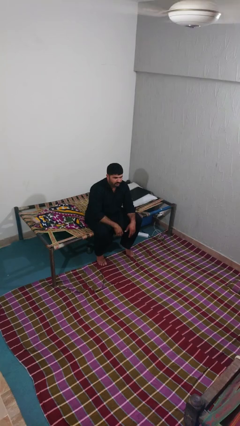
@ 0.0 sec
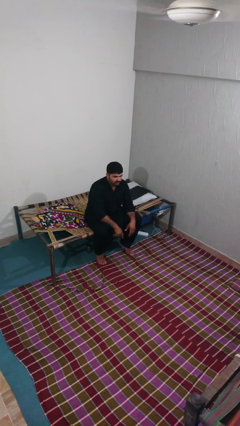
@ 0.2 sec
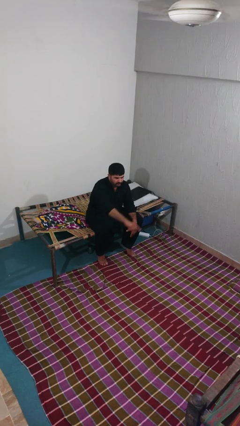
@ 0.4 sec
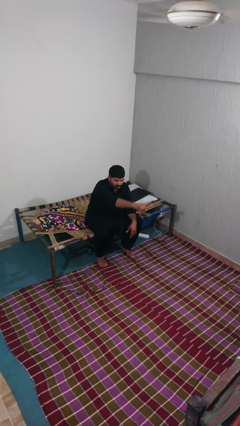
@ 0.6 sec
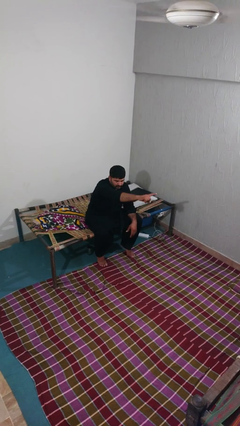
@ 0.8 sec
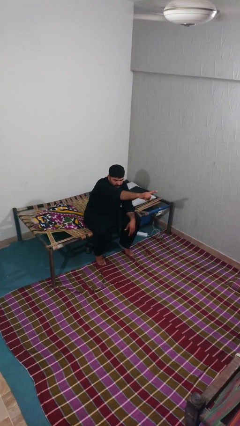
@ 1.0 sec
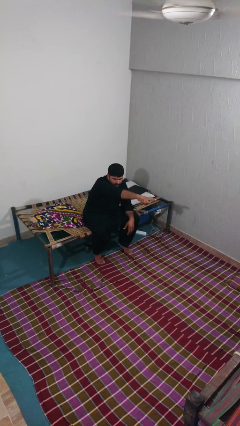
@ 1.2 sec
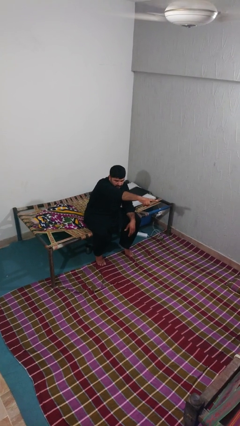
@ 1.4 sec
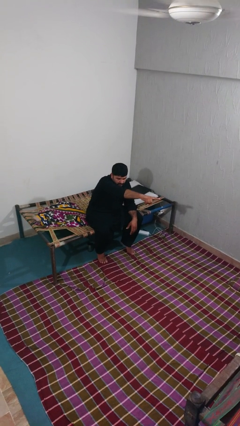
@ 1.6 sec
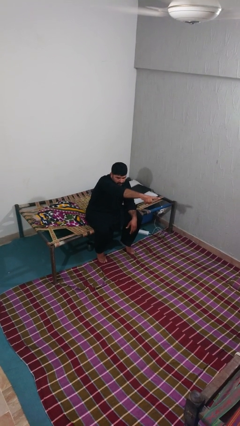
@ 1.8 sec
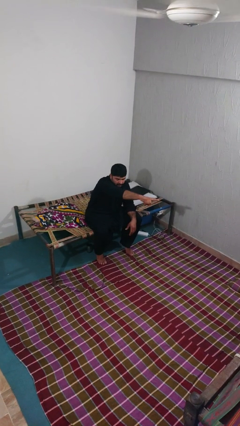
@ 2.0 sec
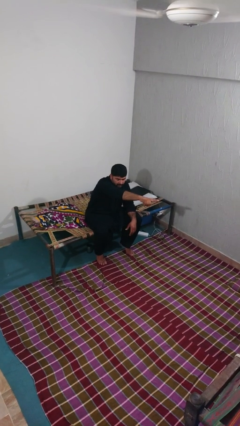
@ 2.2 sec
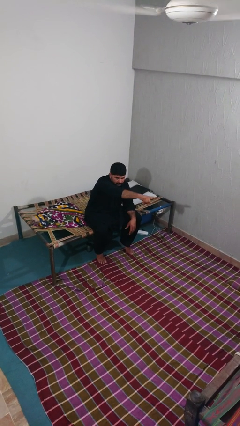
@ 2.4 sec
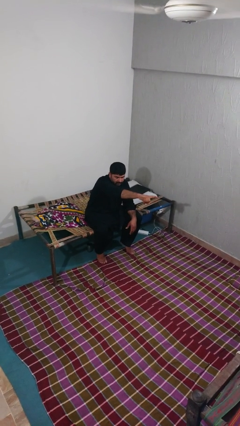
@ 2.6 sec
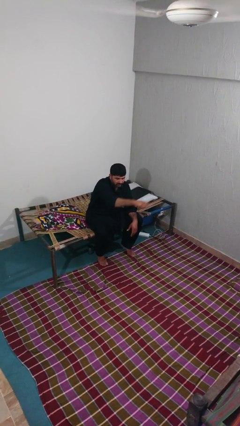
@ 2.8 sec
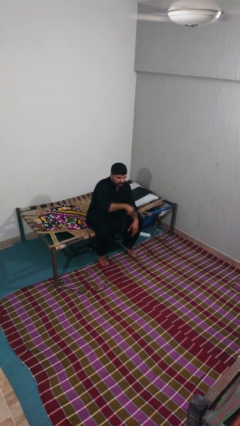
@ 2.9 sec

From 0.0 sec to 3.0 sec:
person points at person

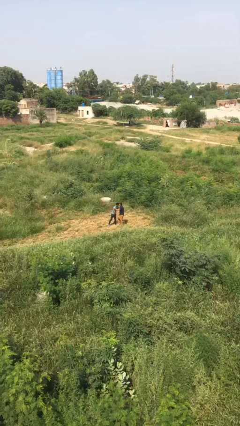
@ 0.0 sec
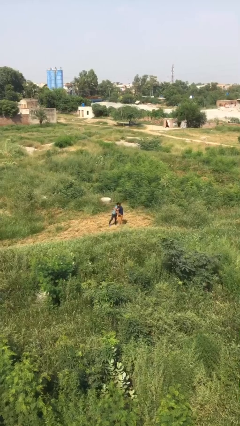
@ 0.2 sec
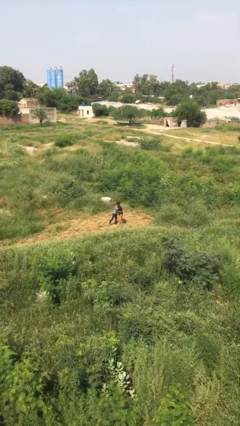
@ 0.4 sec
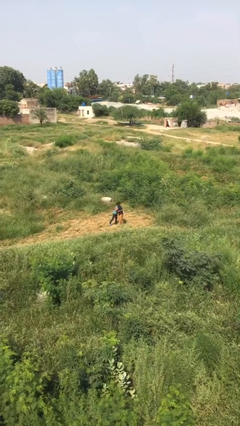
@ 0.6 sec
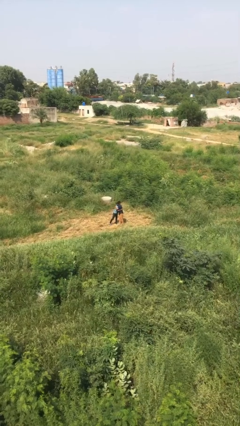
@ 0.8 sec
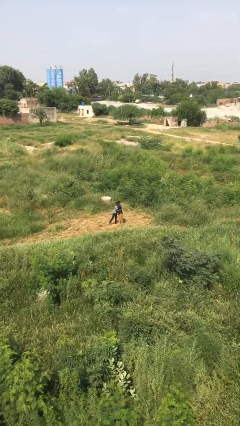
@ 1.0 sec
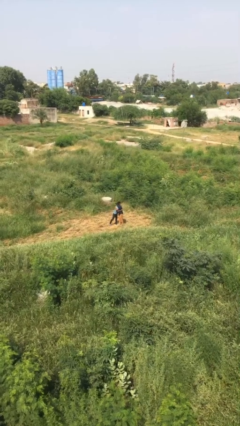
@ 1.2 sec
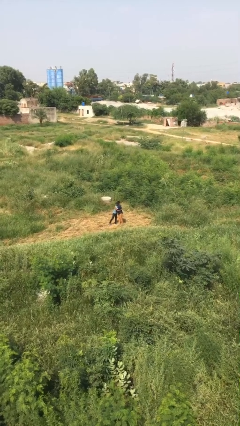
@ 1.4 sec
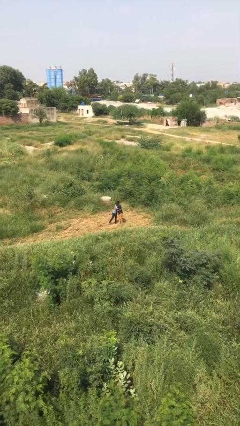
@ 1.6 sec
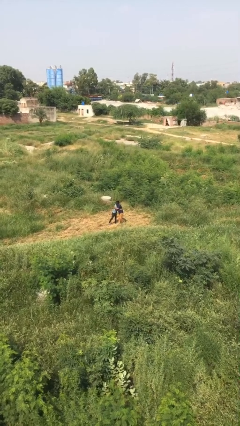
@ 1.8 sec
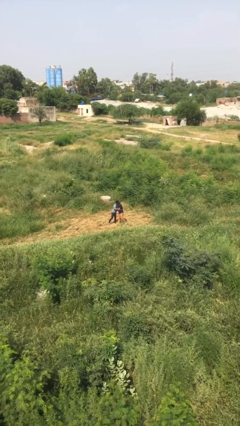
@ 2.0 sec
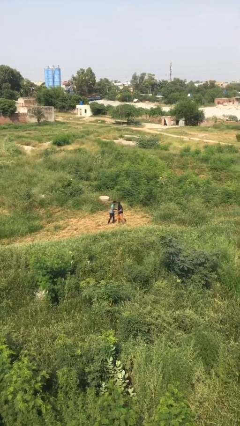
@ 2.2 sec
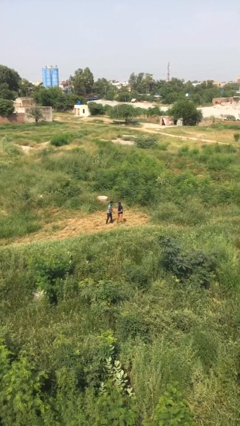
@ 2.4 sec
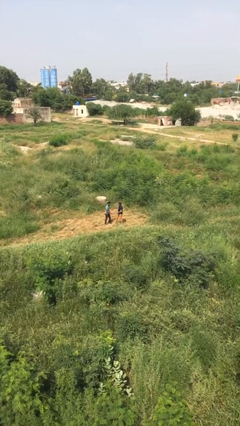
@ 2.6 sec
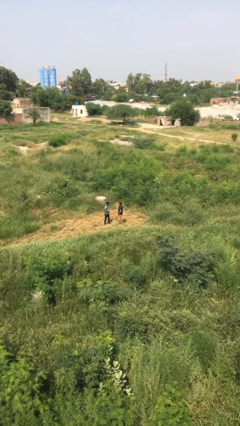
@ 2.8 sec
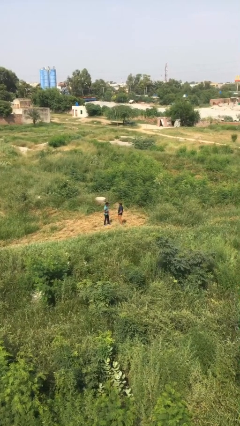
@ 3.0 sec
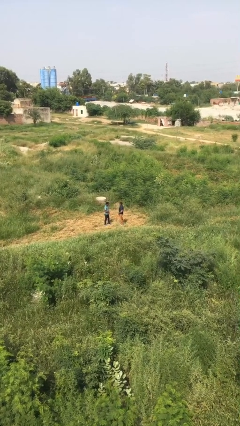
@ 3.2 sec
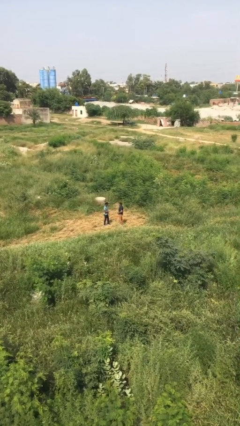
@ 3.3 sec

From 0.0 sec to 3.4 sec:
person embraces person

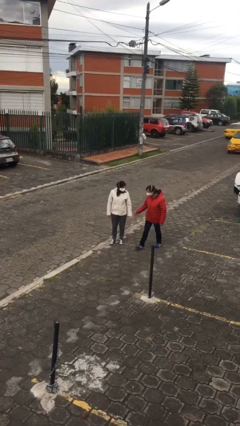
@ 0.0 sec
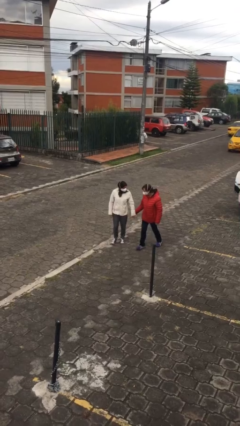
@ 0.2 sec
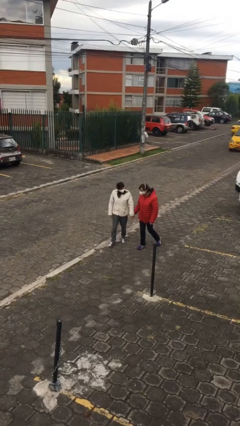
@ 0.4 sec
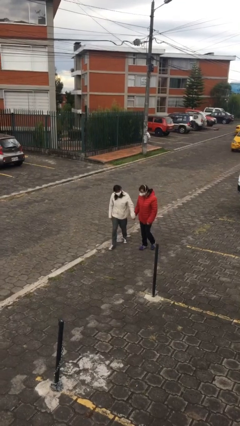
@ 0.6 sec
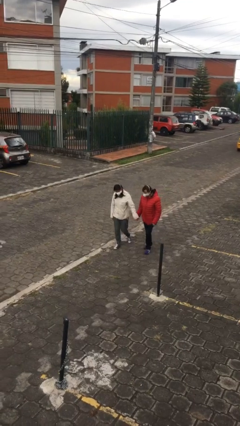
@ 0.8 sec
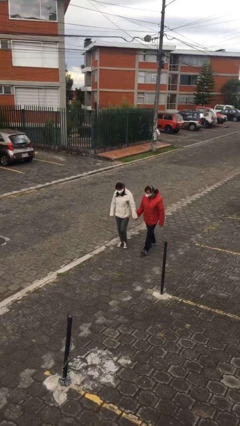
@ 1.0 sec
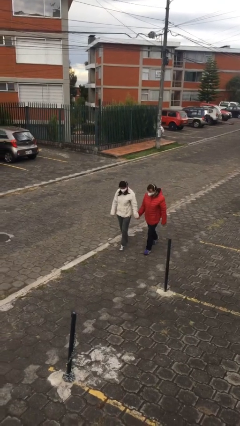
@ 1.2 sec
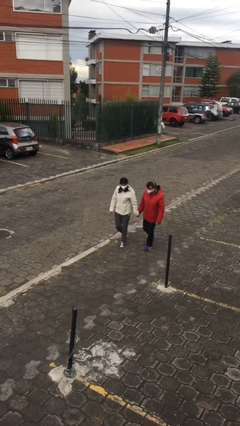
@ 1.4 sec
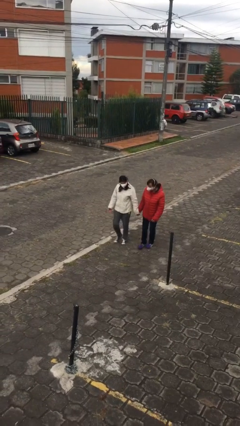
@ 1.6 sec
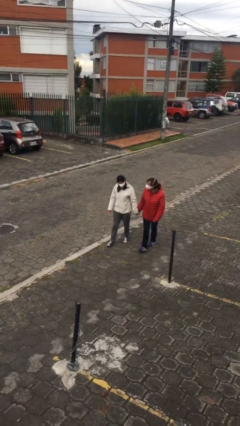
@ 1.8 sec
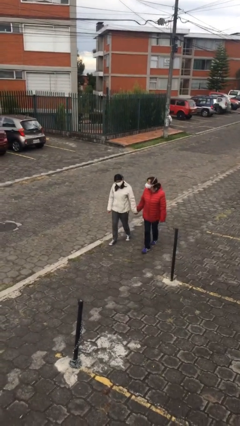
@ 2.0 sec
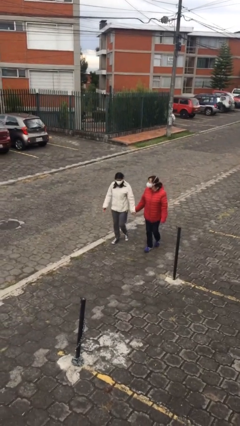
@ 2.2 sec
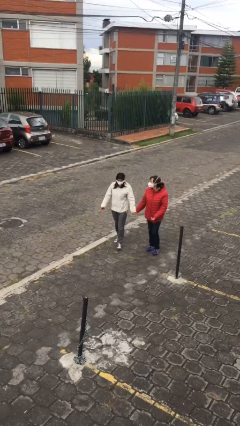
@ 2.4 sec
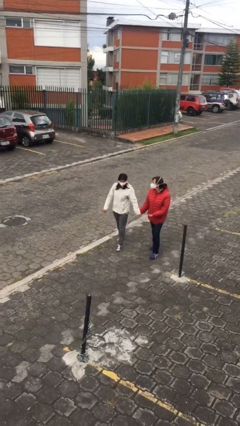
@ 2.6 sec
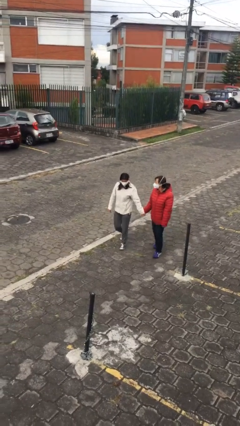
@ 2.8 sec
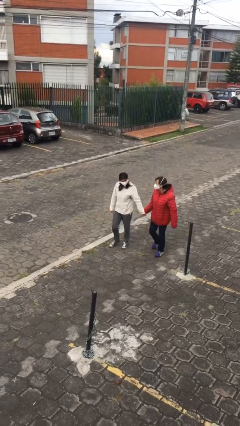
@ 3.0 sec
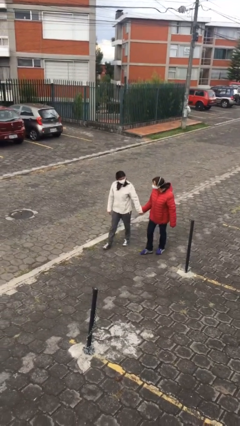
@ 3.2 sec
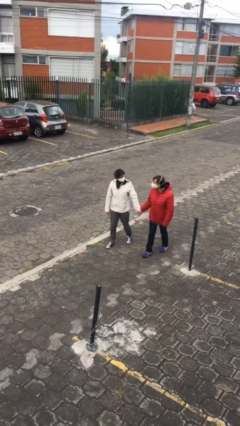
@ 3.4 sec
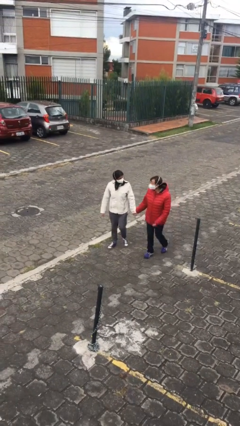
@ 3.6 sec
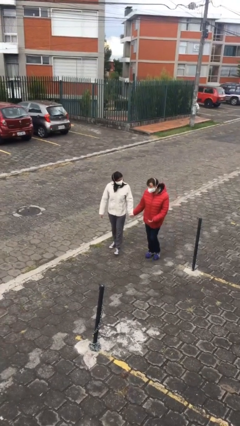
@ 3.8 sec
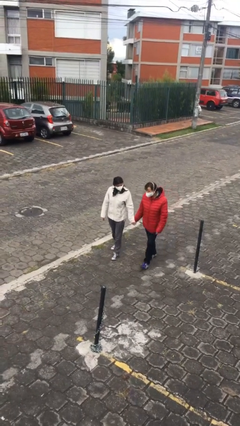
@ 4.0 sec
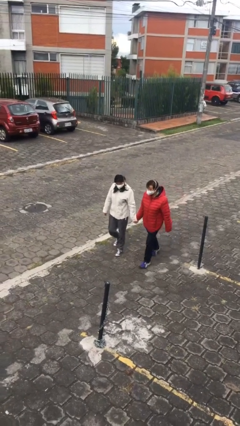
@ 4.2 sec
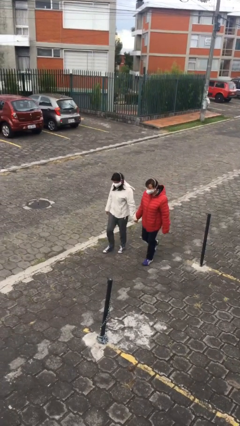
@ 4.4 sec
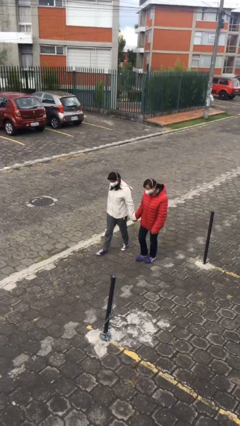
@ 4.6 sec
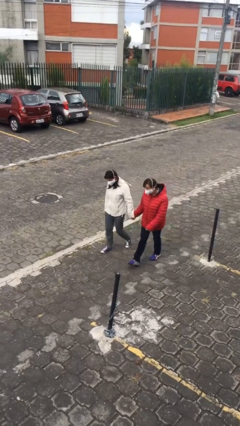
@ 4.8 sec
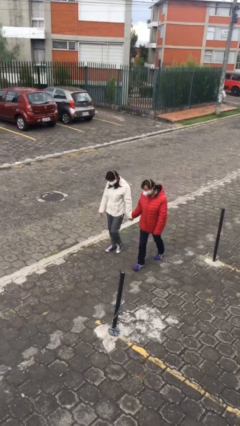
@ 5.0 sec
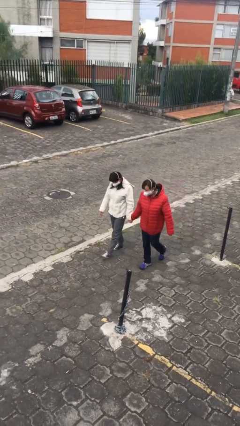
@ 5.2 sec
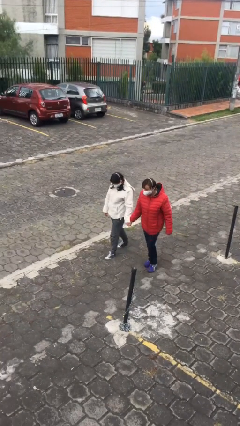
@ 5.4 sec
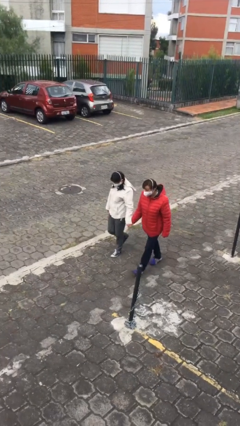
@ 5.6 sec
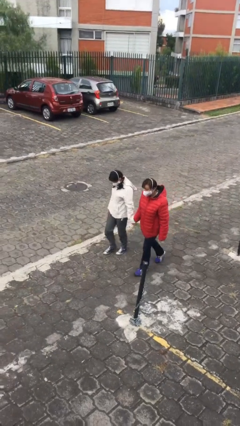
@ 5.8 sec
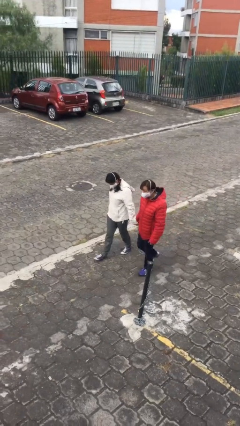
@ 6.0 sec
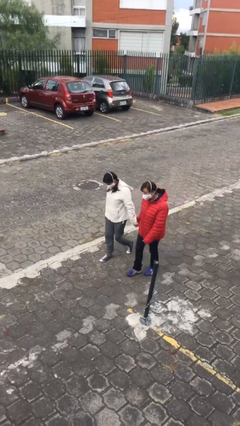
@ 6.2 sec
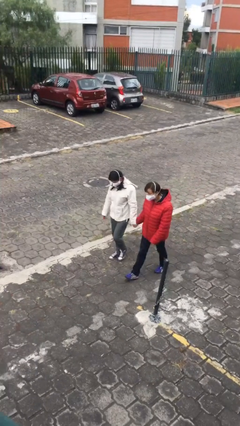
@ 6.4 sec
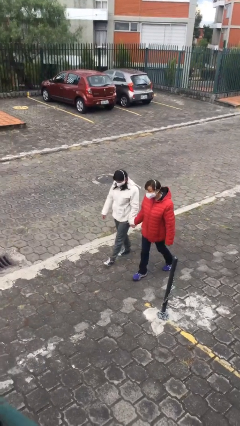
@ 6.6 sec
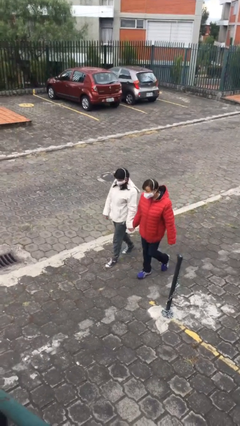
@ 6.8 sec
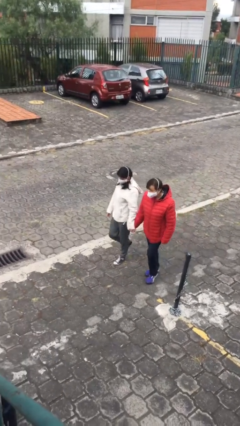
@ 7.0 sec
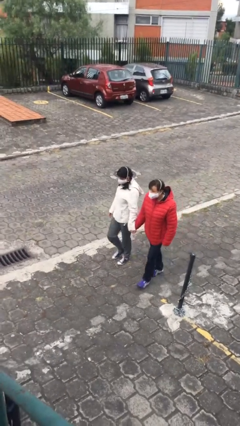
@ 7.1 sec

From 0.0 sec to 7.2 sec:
person holds hand

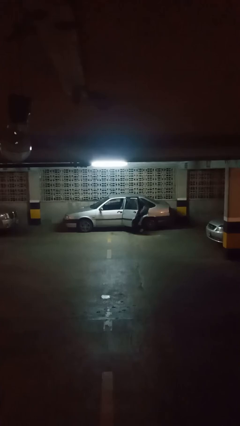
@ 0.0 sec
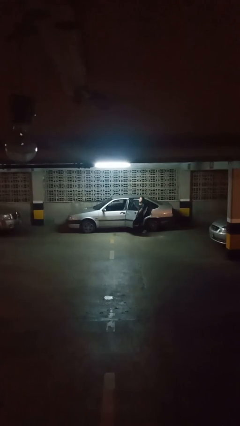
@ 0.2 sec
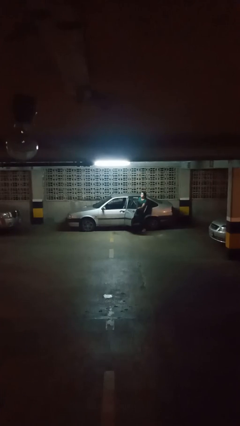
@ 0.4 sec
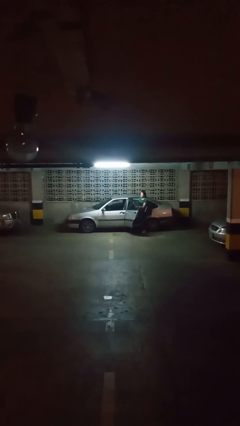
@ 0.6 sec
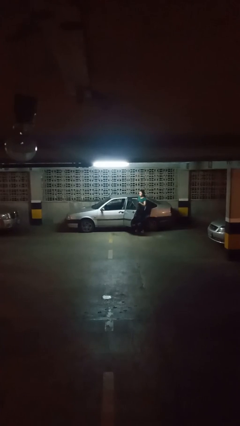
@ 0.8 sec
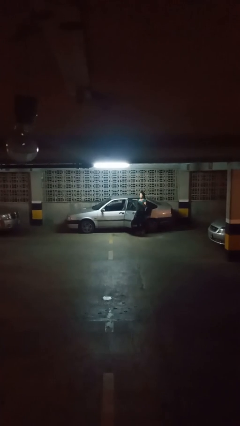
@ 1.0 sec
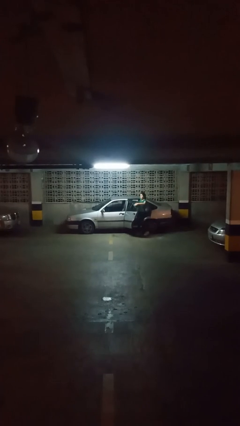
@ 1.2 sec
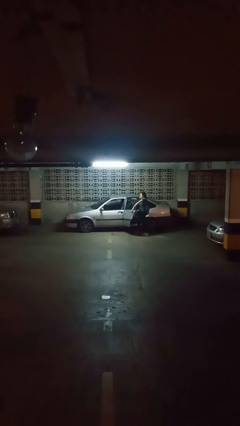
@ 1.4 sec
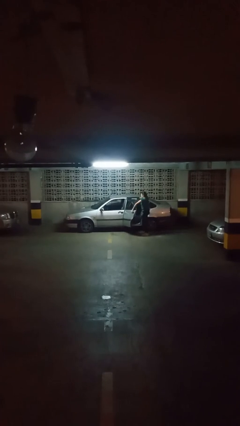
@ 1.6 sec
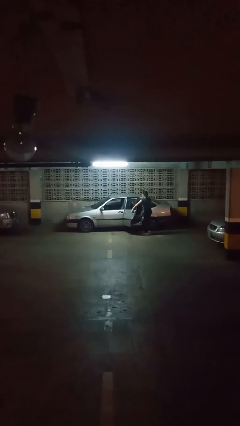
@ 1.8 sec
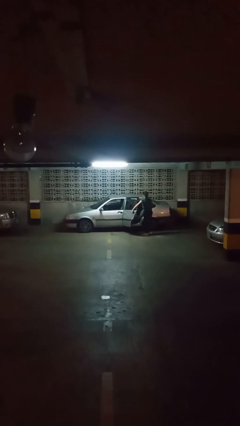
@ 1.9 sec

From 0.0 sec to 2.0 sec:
car drops off person

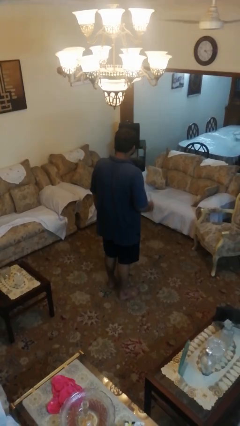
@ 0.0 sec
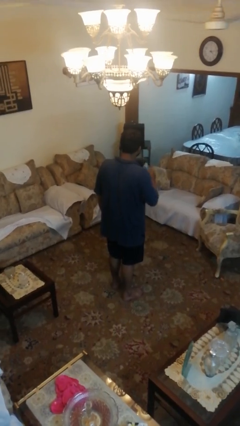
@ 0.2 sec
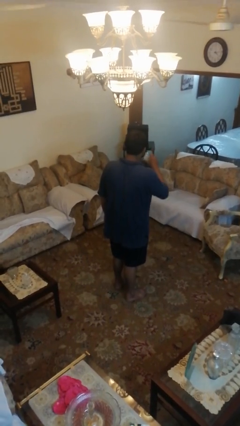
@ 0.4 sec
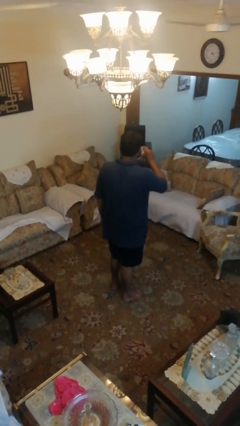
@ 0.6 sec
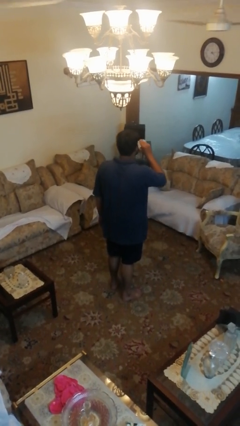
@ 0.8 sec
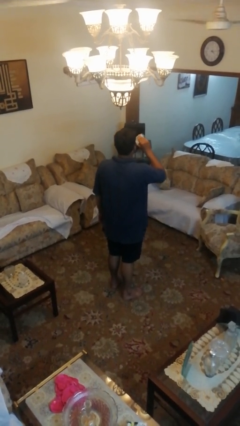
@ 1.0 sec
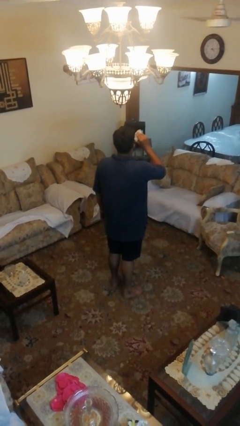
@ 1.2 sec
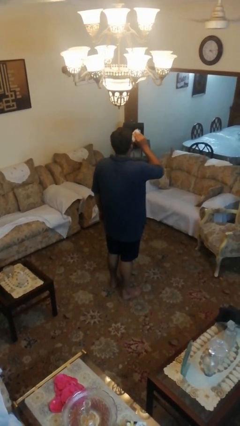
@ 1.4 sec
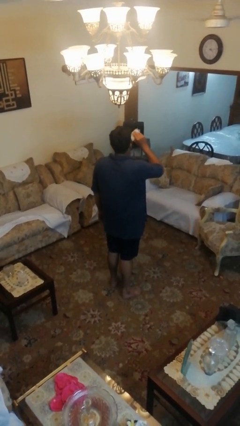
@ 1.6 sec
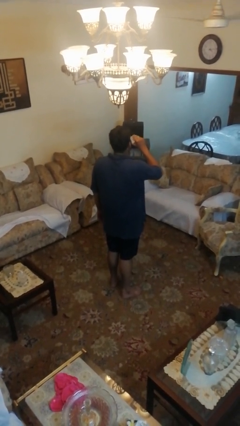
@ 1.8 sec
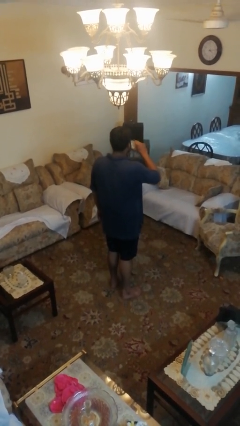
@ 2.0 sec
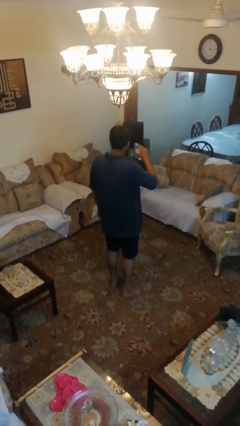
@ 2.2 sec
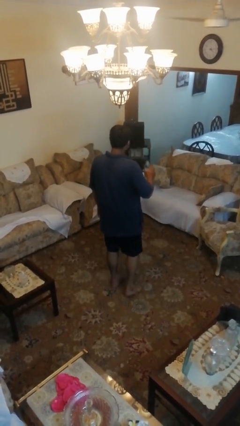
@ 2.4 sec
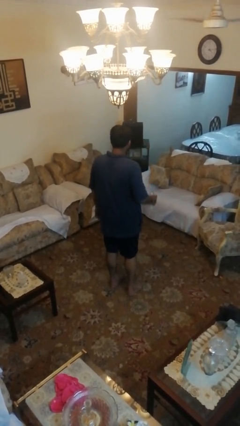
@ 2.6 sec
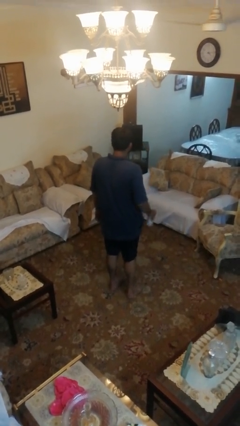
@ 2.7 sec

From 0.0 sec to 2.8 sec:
person drinks from bottle
